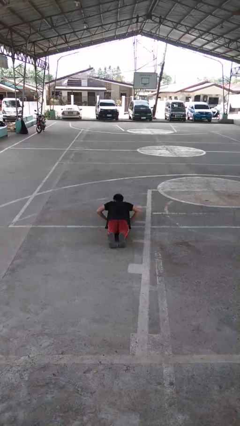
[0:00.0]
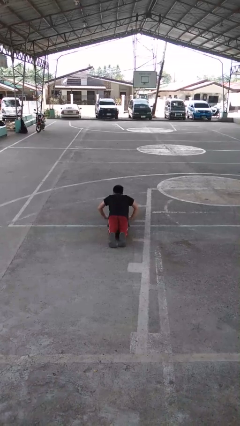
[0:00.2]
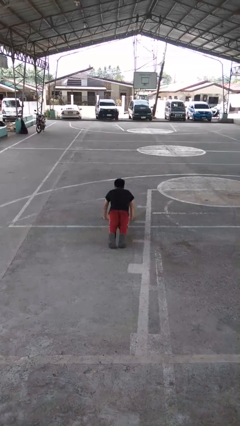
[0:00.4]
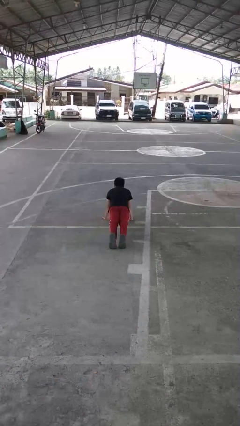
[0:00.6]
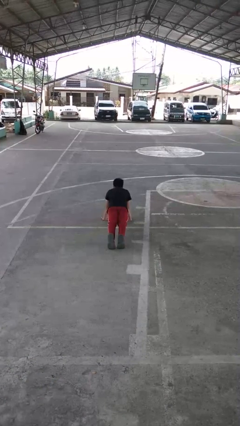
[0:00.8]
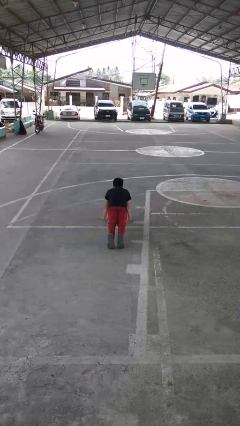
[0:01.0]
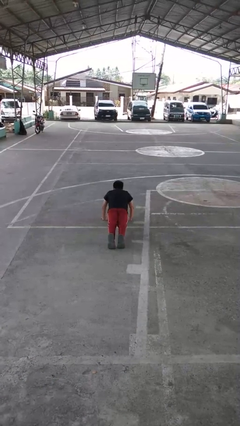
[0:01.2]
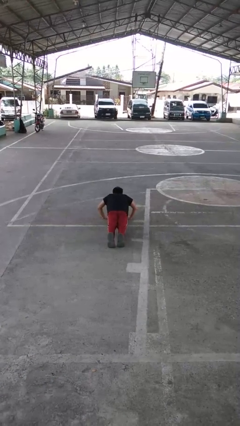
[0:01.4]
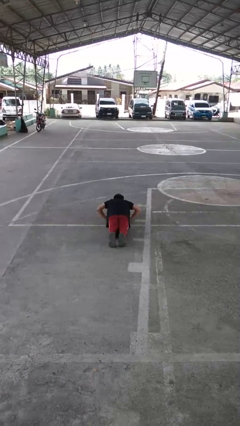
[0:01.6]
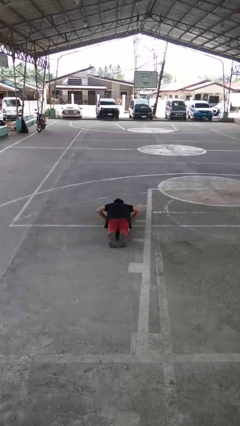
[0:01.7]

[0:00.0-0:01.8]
person exercises with pushup

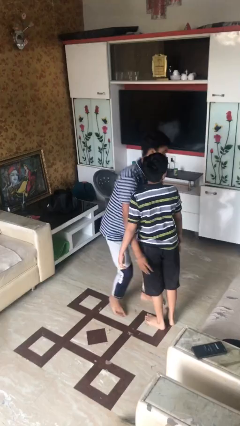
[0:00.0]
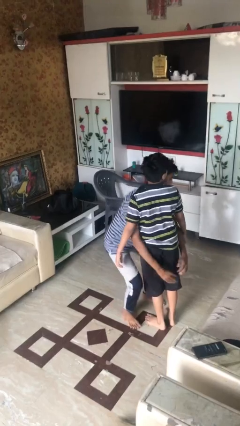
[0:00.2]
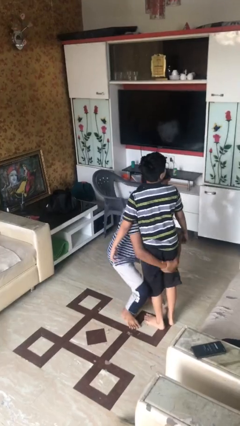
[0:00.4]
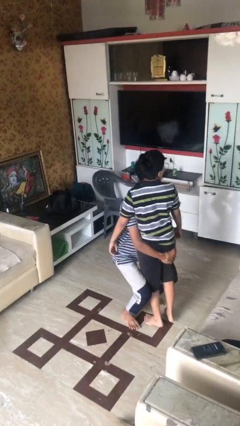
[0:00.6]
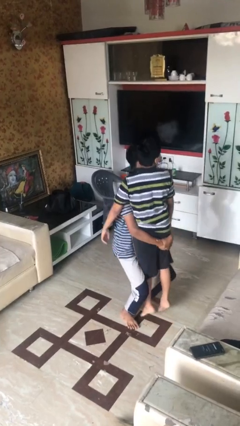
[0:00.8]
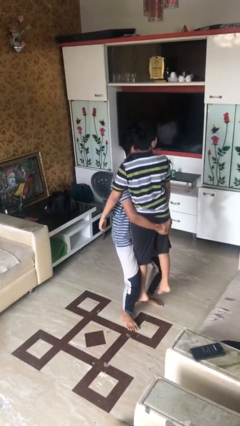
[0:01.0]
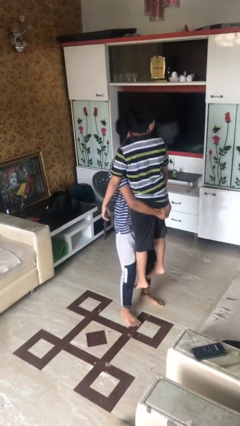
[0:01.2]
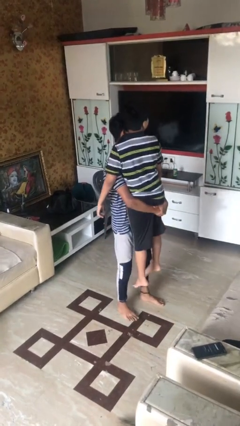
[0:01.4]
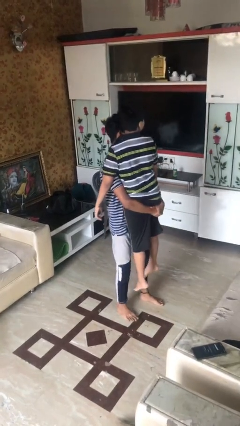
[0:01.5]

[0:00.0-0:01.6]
person picks up person

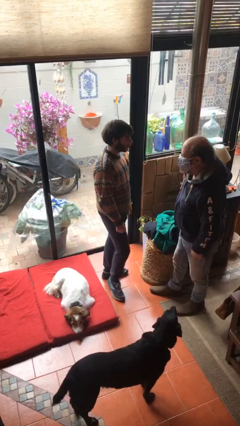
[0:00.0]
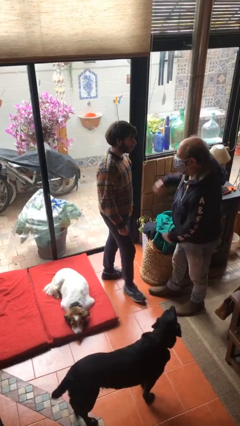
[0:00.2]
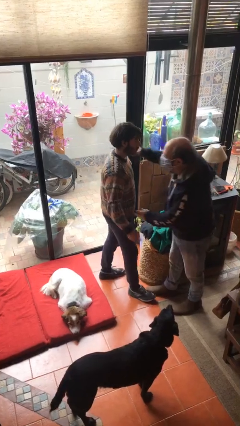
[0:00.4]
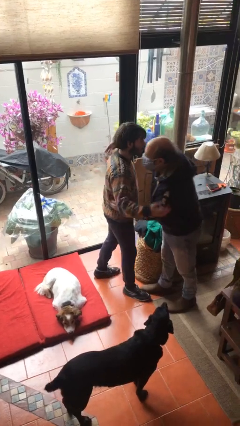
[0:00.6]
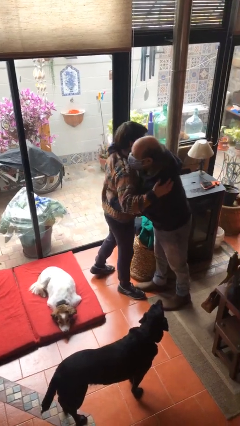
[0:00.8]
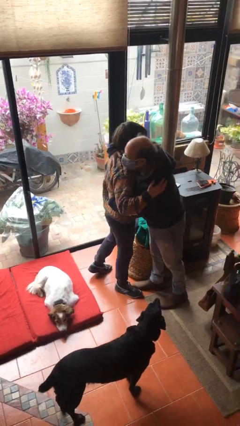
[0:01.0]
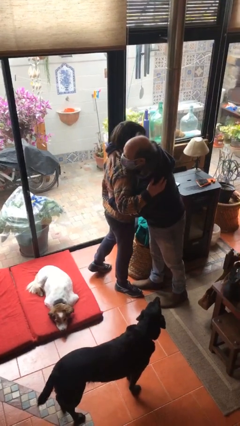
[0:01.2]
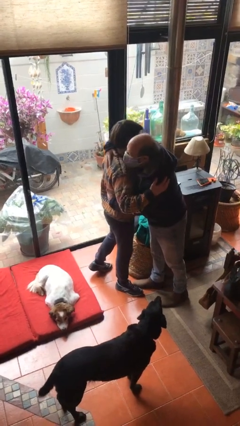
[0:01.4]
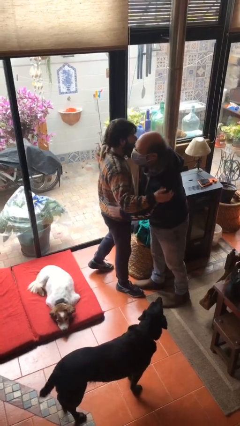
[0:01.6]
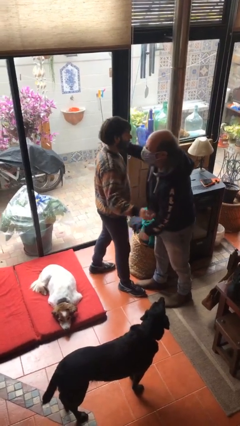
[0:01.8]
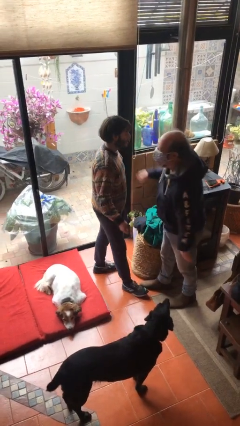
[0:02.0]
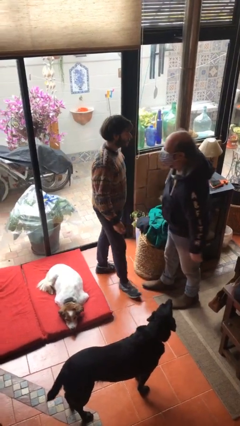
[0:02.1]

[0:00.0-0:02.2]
person kisses cheek of person

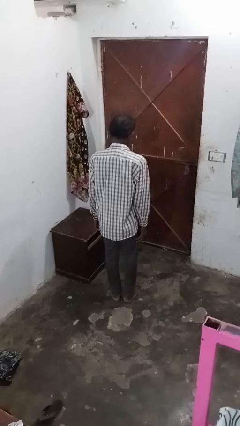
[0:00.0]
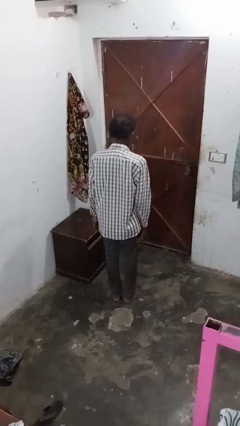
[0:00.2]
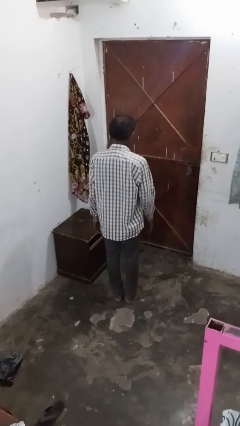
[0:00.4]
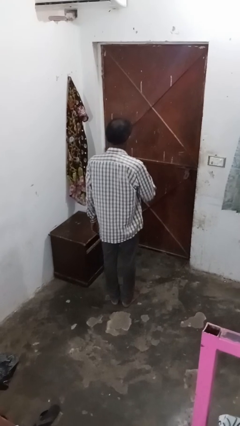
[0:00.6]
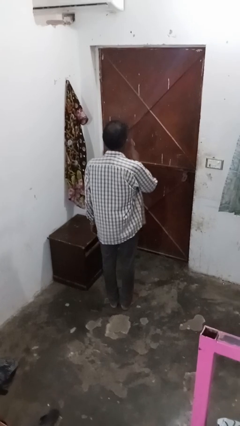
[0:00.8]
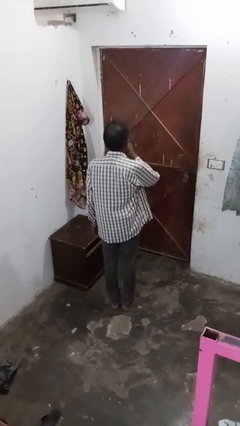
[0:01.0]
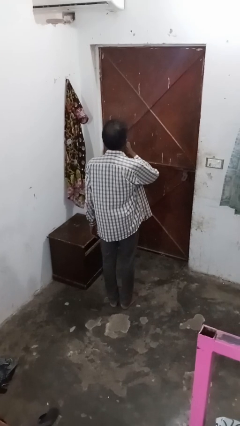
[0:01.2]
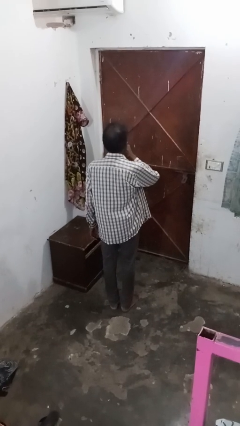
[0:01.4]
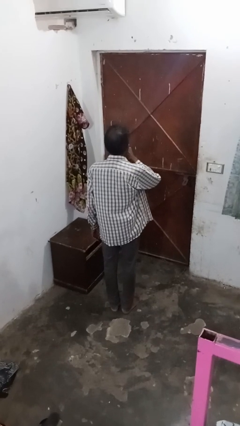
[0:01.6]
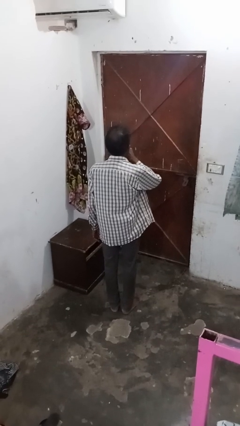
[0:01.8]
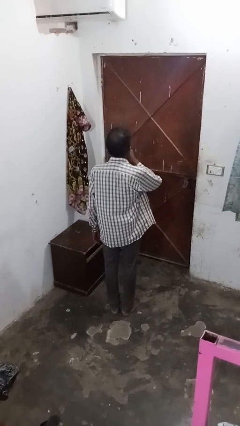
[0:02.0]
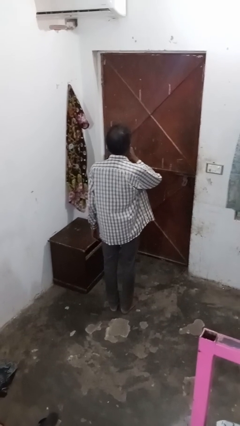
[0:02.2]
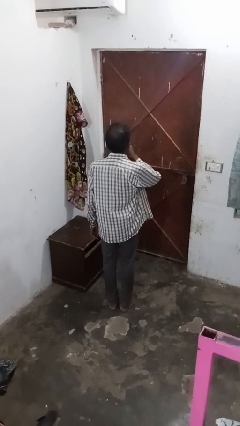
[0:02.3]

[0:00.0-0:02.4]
person gestures be quiet

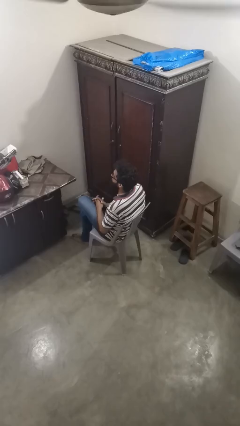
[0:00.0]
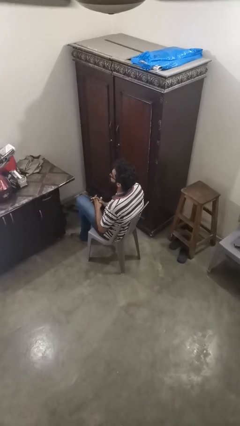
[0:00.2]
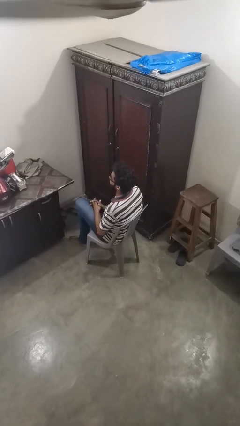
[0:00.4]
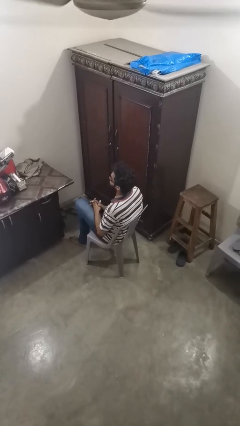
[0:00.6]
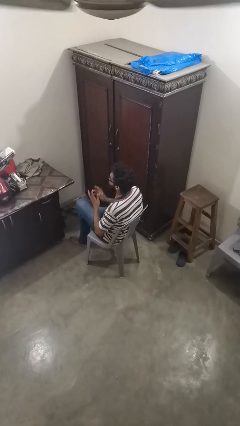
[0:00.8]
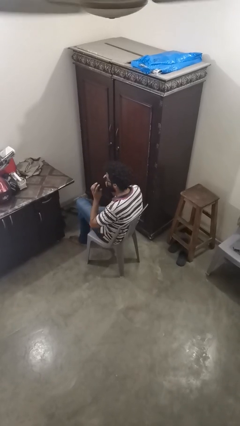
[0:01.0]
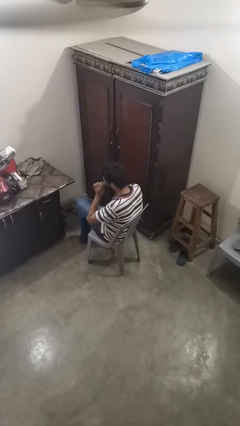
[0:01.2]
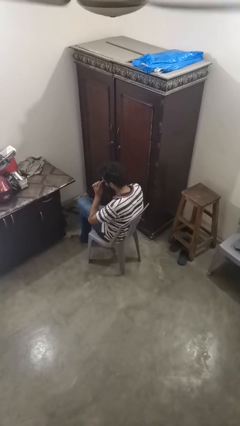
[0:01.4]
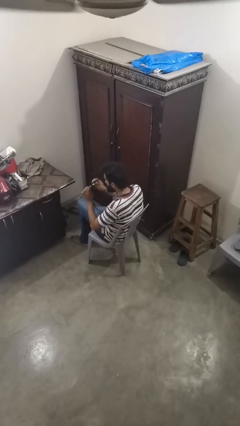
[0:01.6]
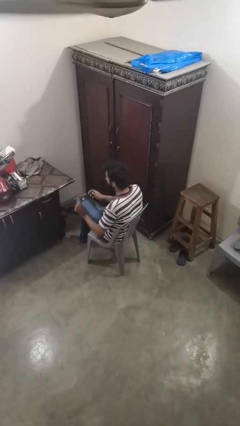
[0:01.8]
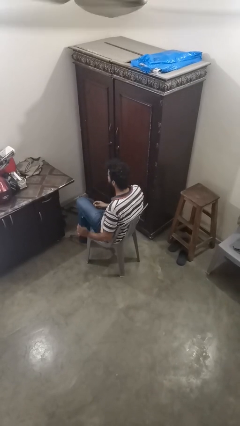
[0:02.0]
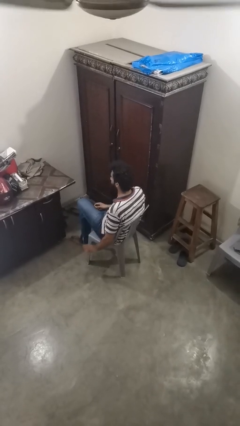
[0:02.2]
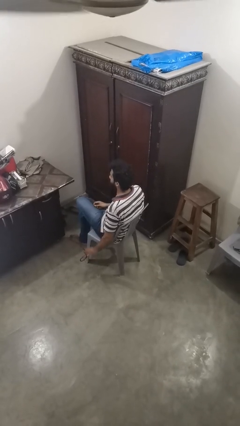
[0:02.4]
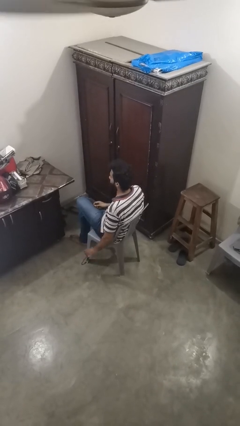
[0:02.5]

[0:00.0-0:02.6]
person takes off sunglasses

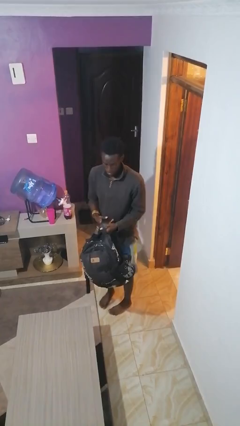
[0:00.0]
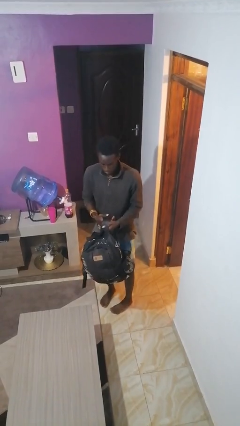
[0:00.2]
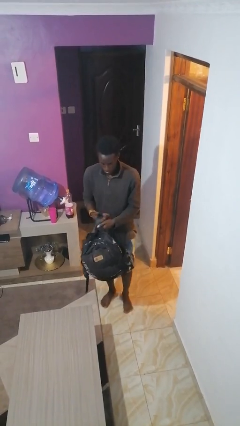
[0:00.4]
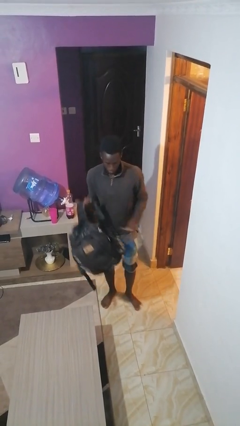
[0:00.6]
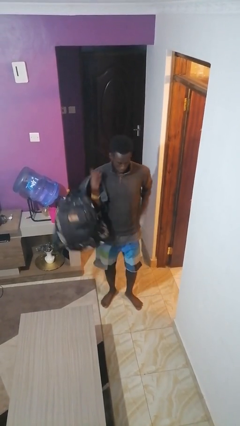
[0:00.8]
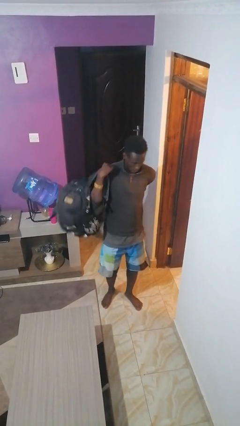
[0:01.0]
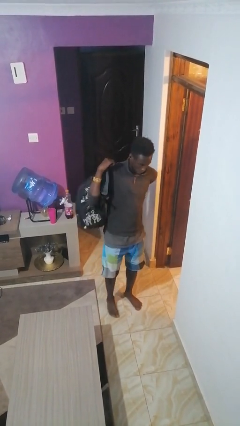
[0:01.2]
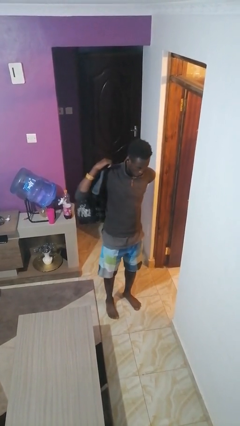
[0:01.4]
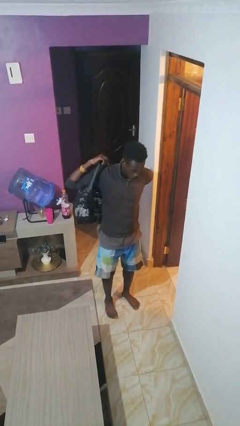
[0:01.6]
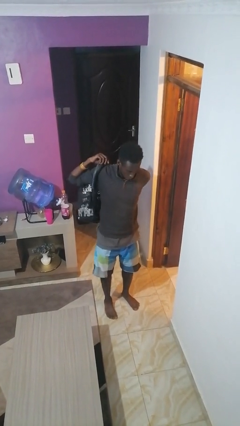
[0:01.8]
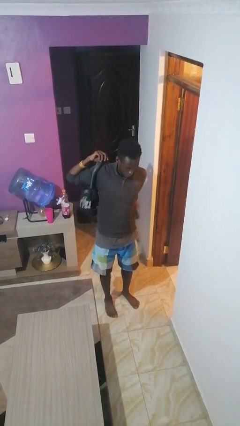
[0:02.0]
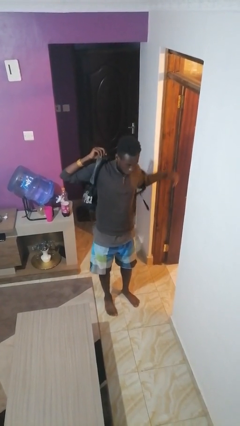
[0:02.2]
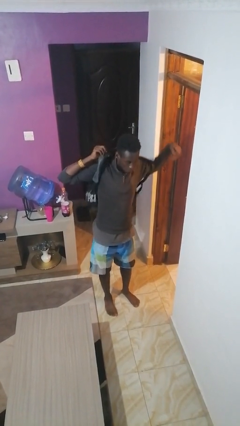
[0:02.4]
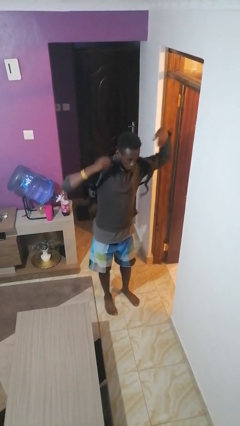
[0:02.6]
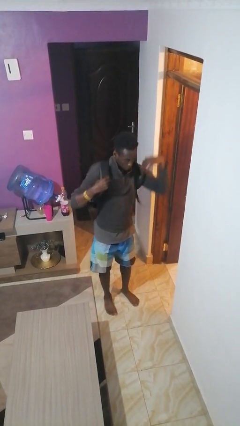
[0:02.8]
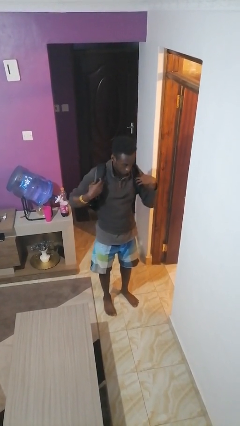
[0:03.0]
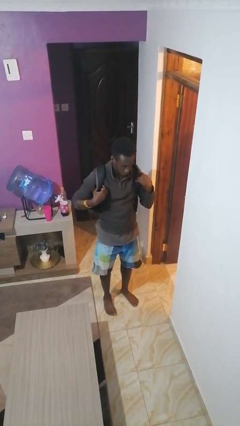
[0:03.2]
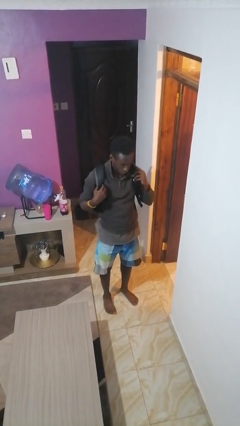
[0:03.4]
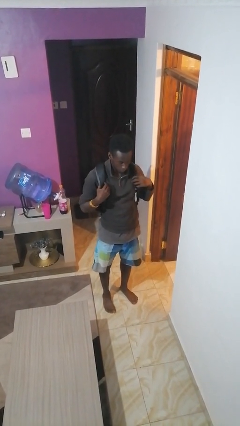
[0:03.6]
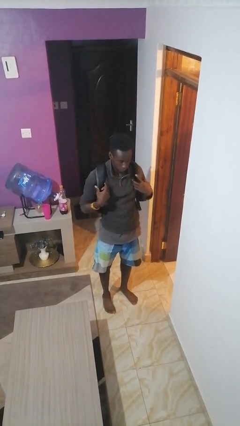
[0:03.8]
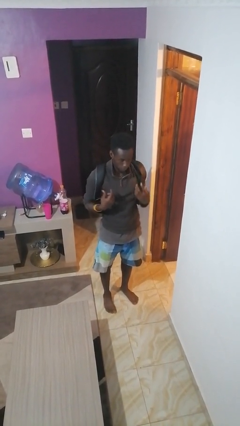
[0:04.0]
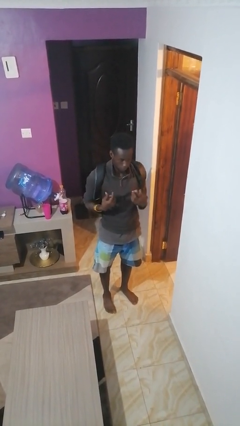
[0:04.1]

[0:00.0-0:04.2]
person puts on backpack

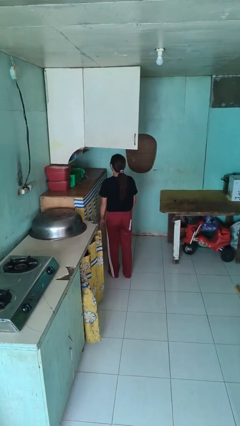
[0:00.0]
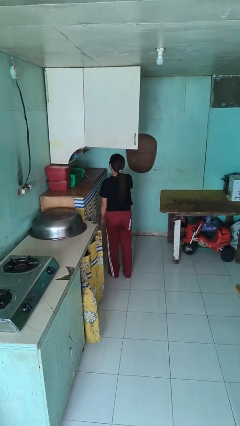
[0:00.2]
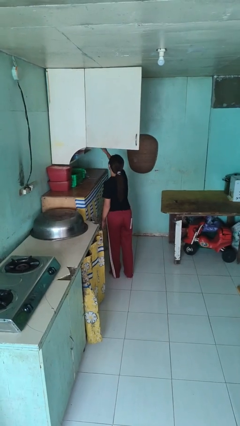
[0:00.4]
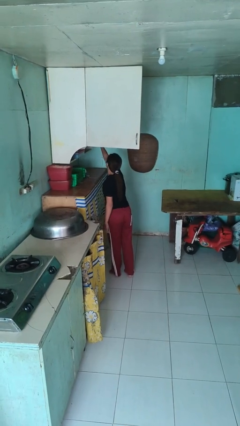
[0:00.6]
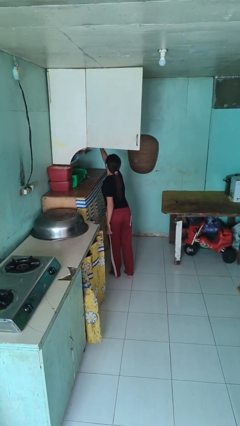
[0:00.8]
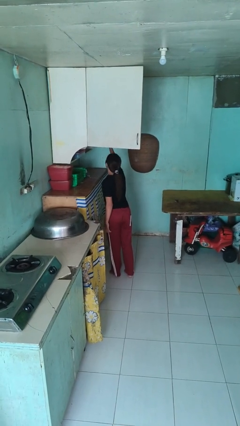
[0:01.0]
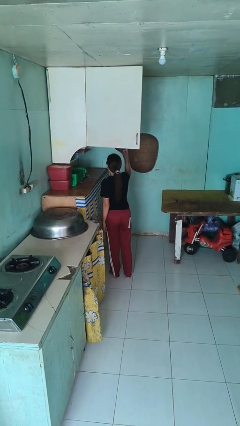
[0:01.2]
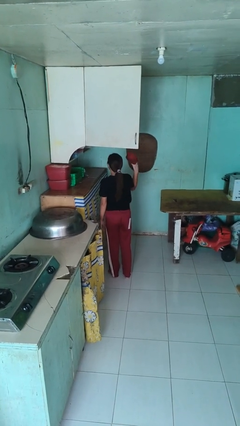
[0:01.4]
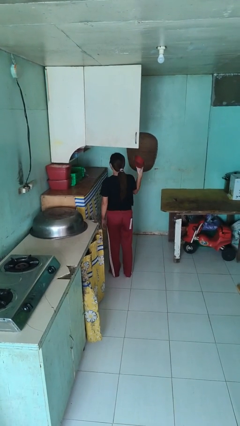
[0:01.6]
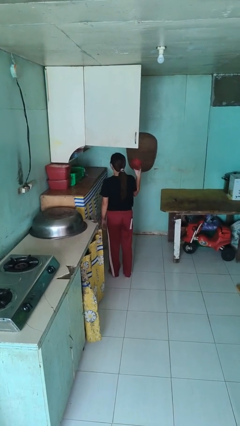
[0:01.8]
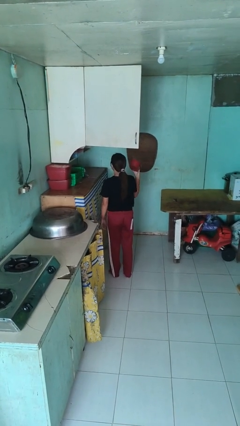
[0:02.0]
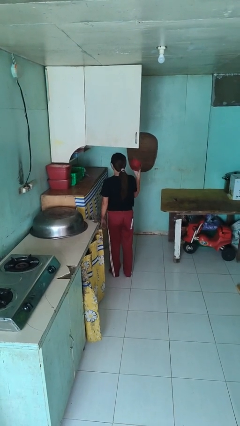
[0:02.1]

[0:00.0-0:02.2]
person takes object from cabinet
